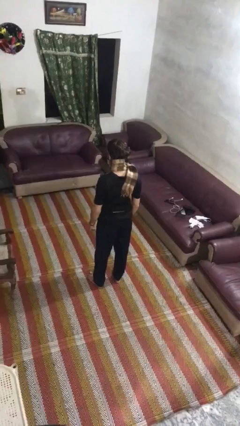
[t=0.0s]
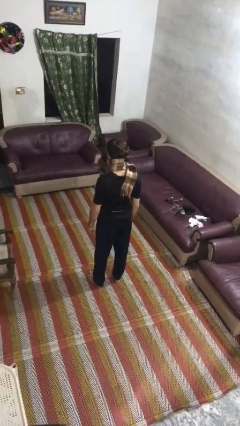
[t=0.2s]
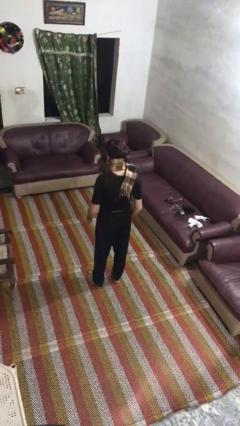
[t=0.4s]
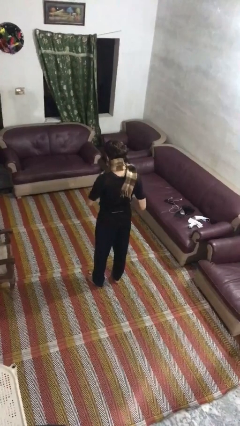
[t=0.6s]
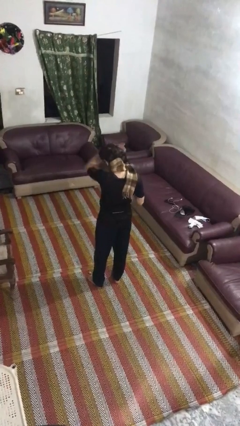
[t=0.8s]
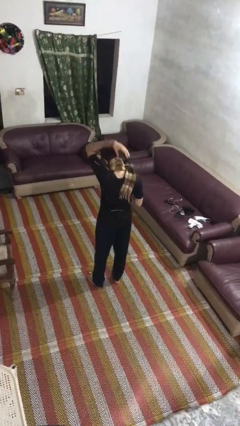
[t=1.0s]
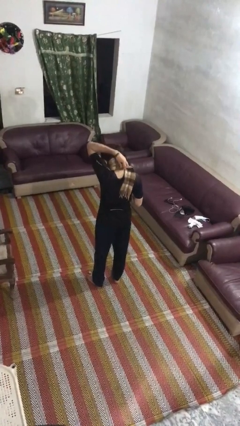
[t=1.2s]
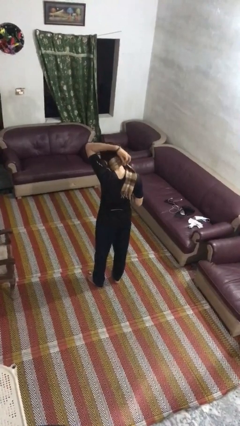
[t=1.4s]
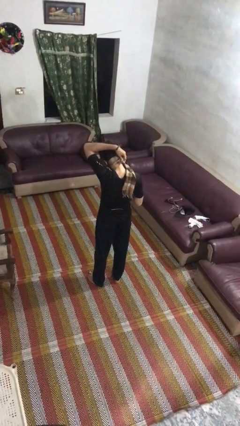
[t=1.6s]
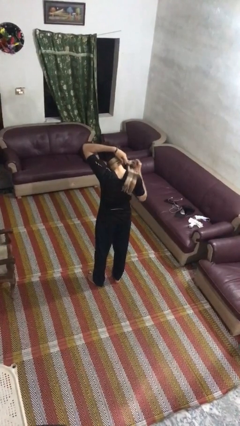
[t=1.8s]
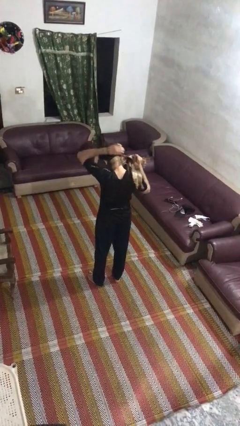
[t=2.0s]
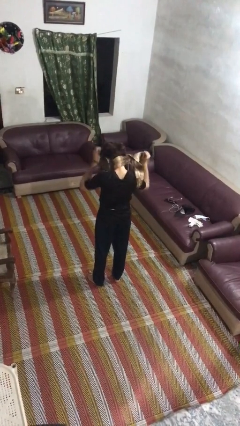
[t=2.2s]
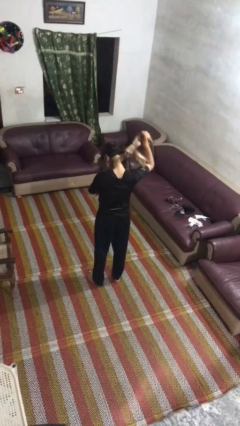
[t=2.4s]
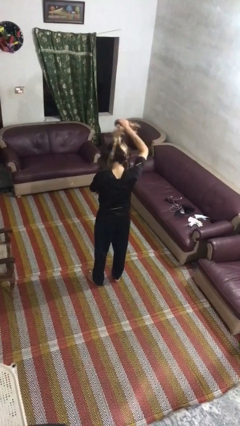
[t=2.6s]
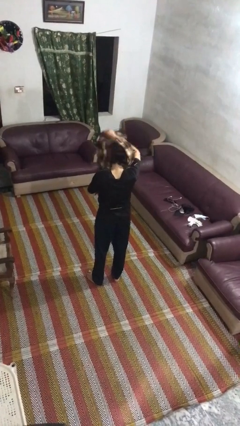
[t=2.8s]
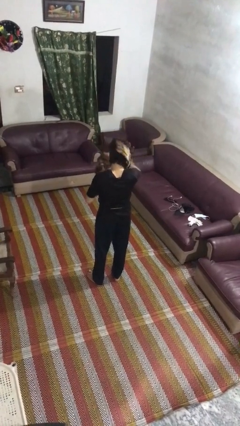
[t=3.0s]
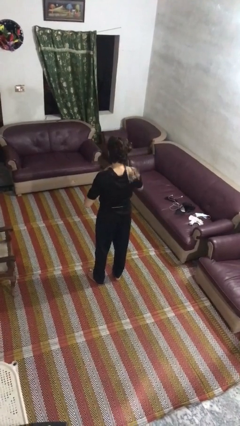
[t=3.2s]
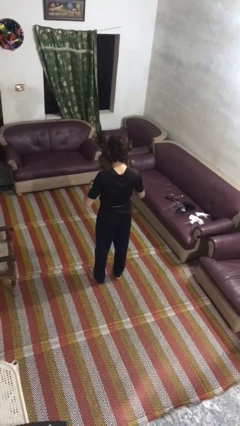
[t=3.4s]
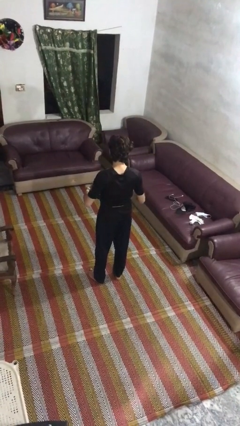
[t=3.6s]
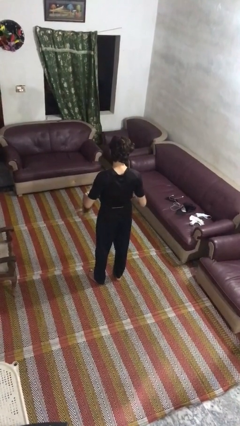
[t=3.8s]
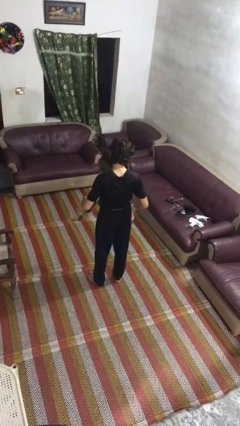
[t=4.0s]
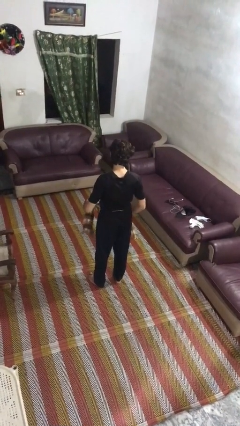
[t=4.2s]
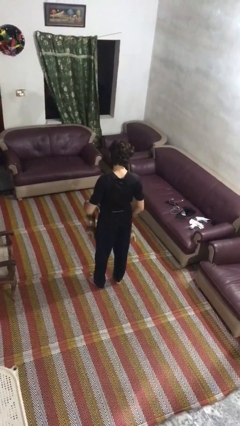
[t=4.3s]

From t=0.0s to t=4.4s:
person takes off scarf

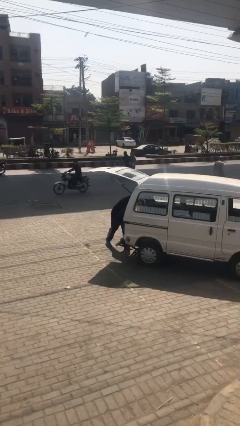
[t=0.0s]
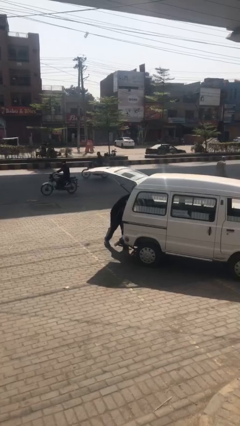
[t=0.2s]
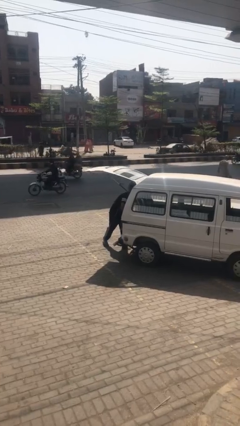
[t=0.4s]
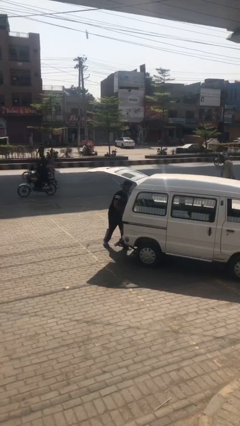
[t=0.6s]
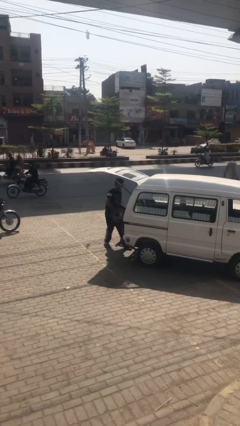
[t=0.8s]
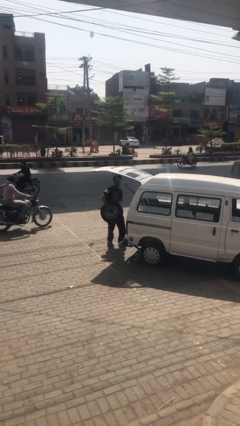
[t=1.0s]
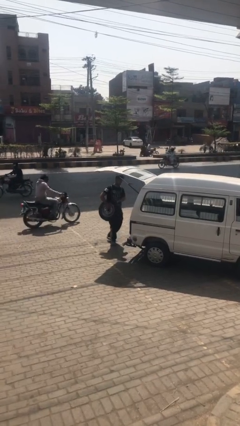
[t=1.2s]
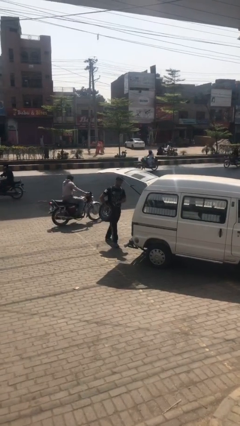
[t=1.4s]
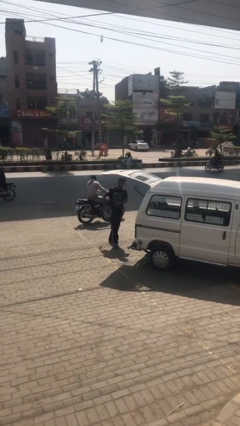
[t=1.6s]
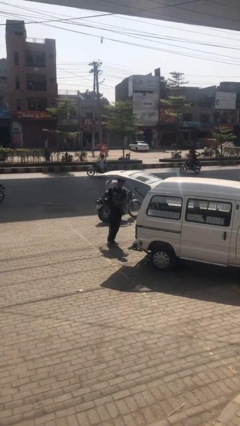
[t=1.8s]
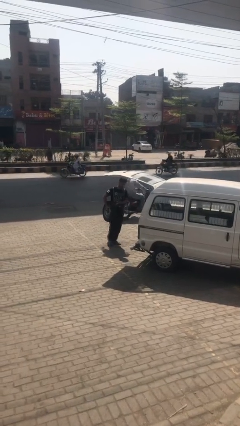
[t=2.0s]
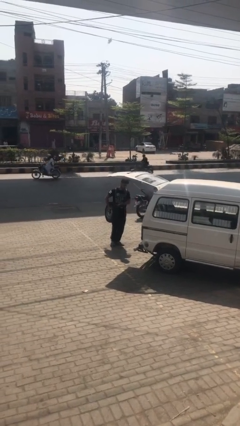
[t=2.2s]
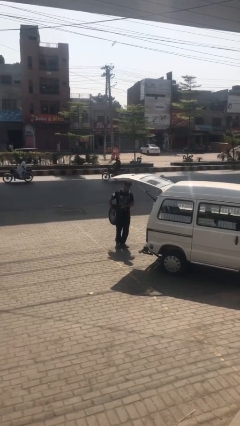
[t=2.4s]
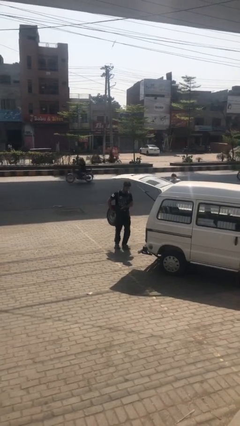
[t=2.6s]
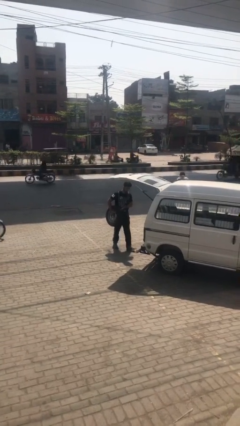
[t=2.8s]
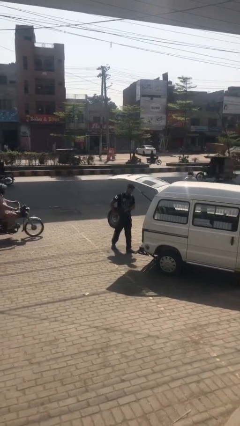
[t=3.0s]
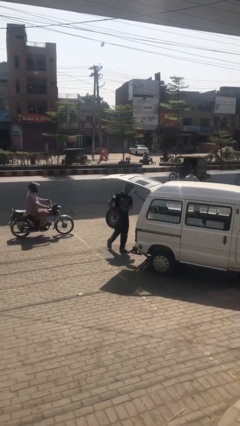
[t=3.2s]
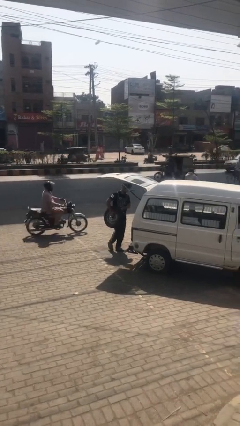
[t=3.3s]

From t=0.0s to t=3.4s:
person unloads car

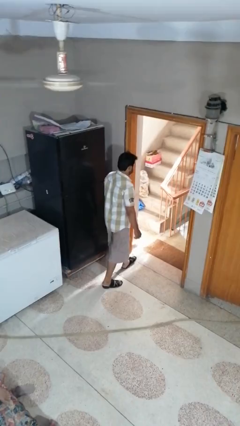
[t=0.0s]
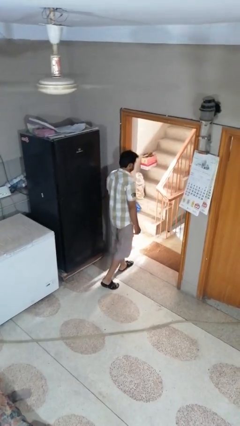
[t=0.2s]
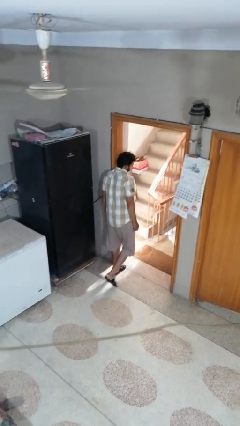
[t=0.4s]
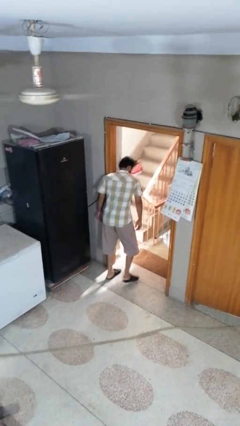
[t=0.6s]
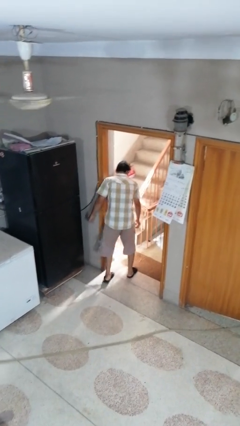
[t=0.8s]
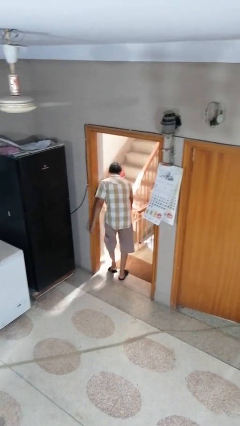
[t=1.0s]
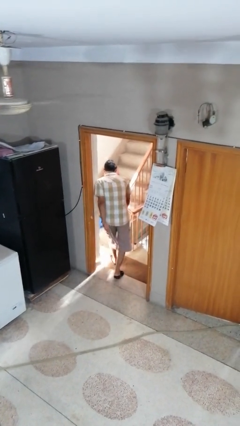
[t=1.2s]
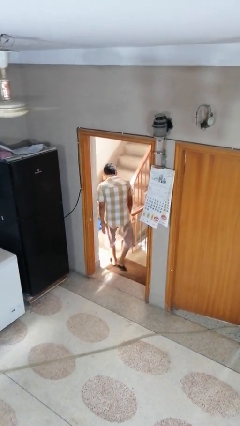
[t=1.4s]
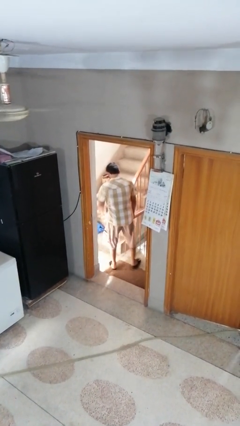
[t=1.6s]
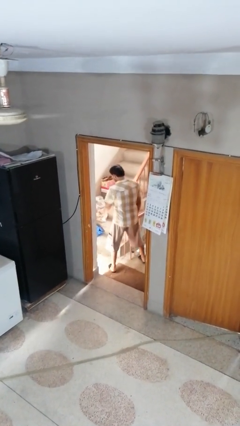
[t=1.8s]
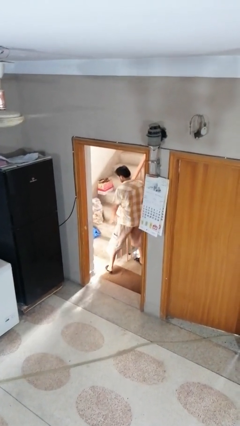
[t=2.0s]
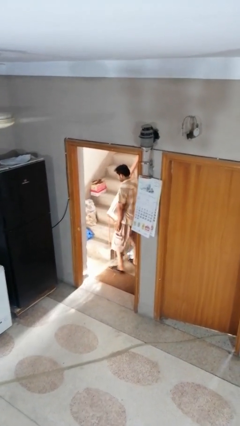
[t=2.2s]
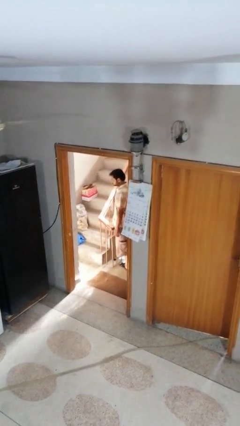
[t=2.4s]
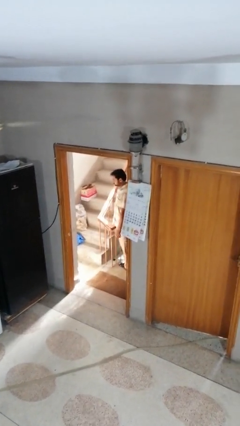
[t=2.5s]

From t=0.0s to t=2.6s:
person bumps into wall

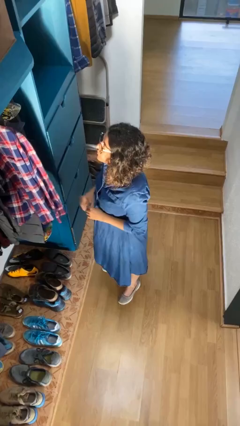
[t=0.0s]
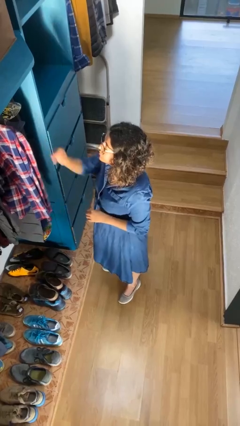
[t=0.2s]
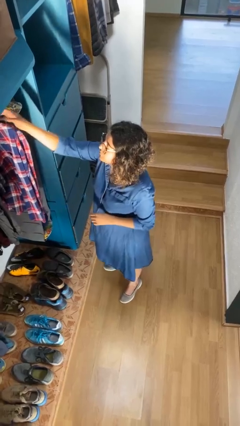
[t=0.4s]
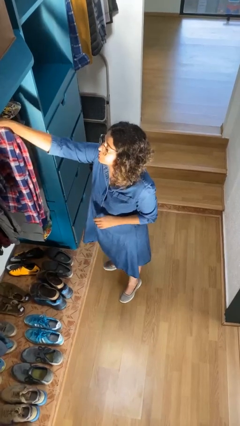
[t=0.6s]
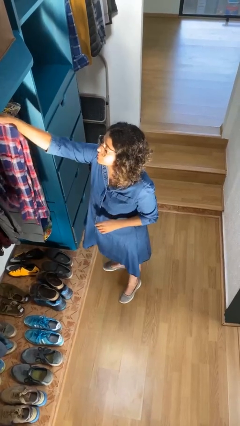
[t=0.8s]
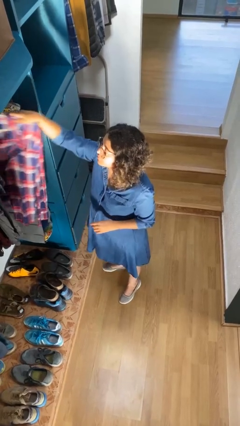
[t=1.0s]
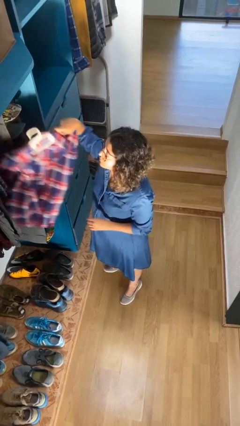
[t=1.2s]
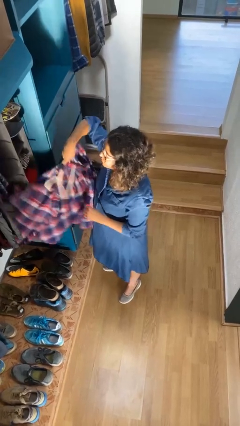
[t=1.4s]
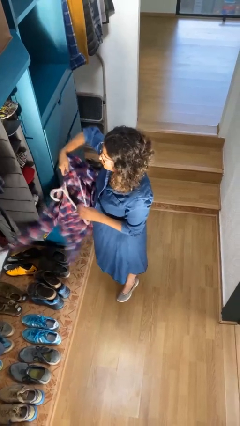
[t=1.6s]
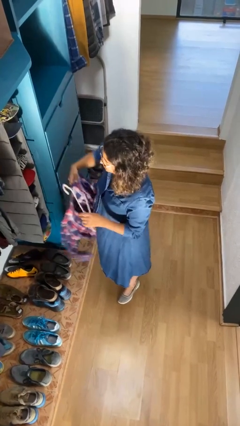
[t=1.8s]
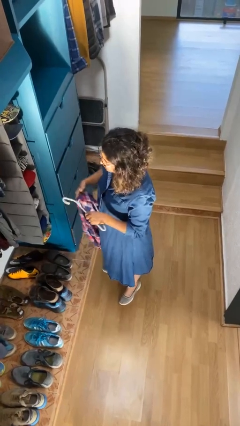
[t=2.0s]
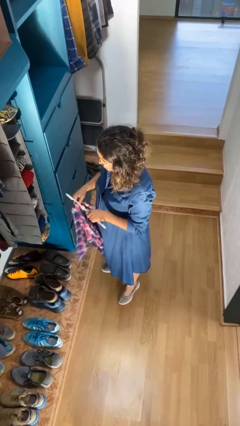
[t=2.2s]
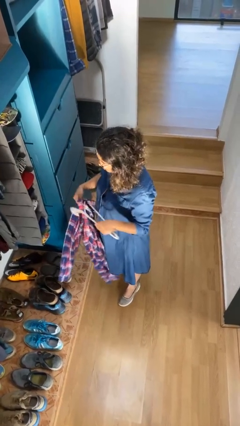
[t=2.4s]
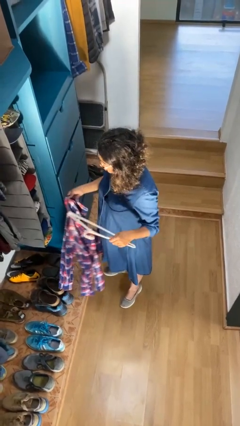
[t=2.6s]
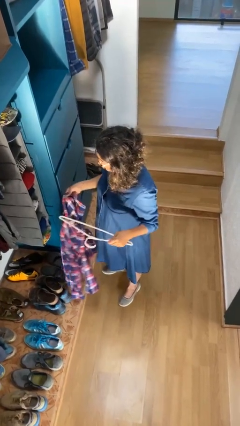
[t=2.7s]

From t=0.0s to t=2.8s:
person takes clothes from closet

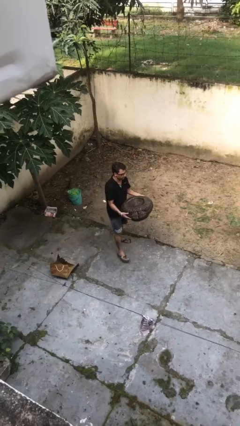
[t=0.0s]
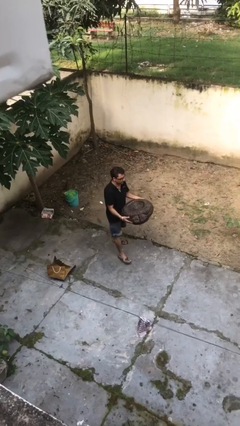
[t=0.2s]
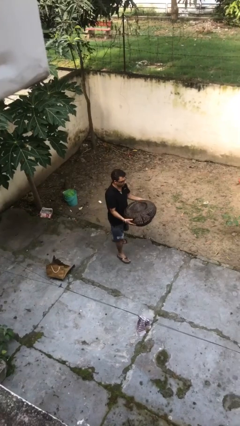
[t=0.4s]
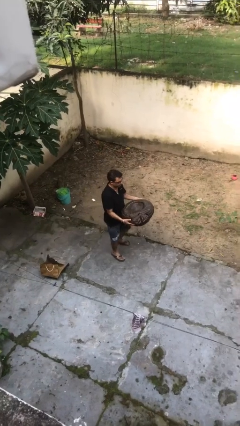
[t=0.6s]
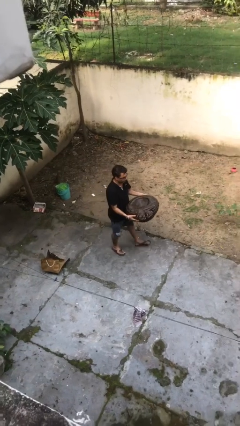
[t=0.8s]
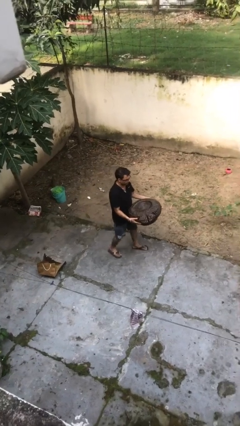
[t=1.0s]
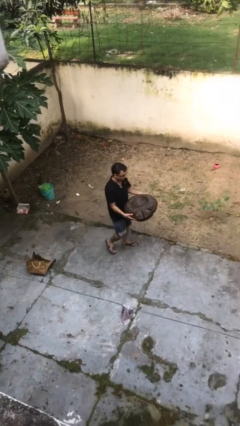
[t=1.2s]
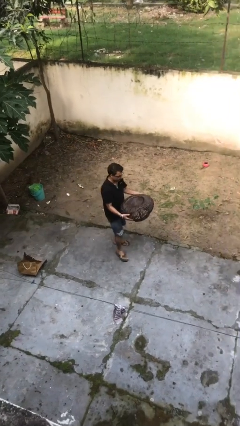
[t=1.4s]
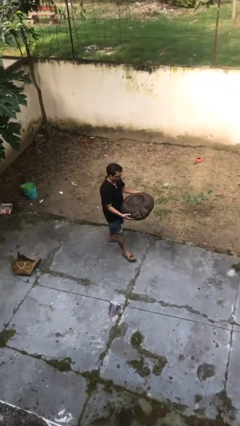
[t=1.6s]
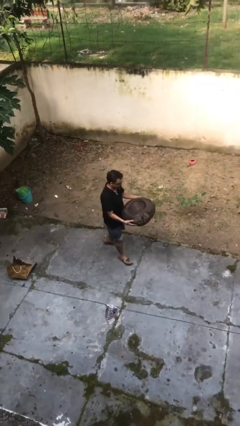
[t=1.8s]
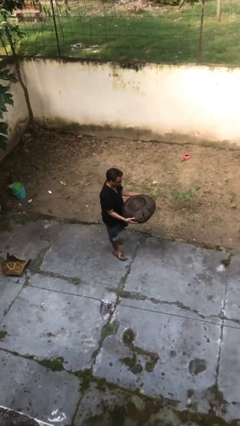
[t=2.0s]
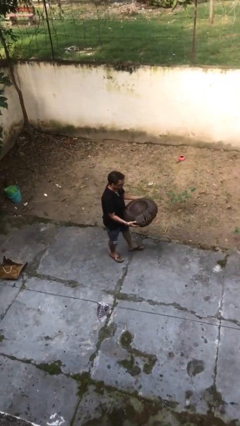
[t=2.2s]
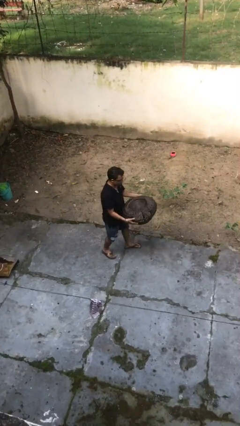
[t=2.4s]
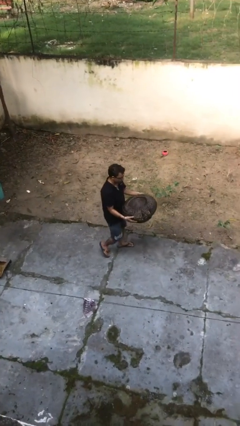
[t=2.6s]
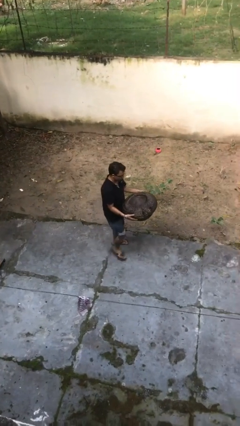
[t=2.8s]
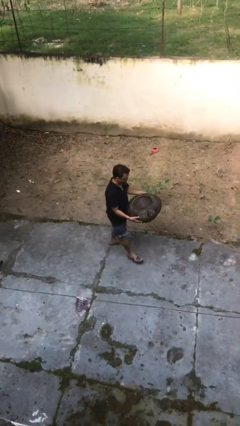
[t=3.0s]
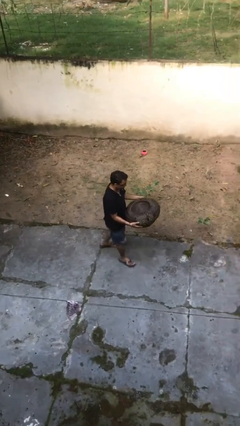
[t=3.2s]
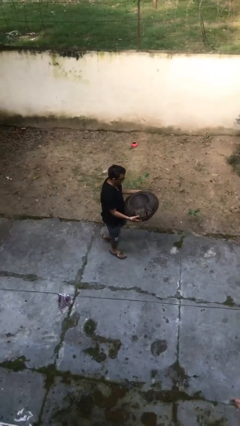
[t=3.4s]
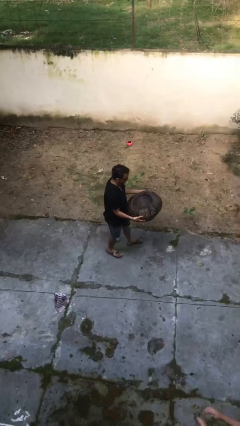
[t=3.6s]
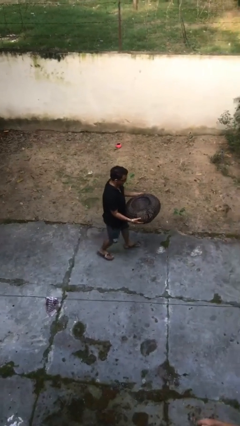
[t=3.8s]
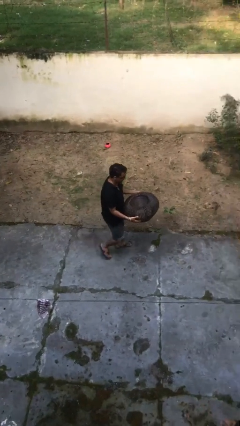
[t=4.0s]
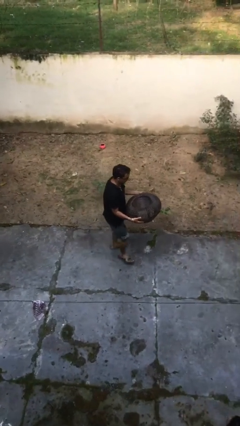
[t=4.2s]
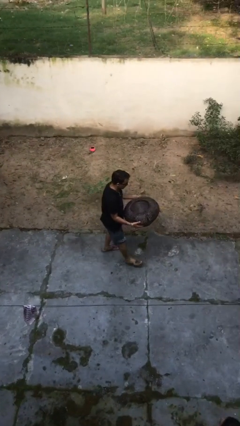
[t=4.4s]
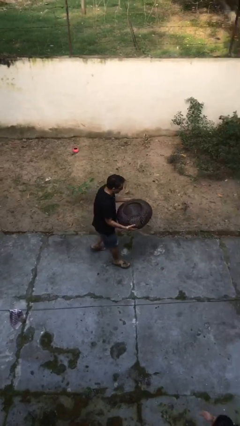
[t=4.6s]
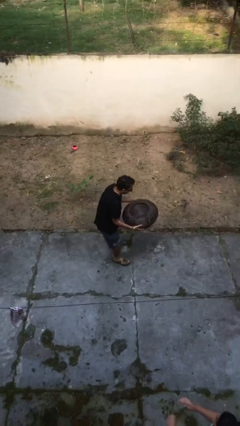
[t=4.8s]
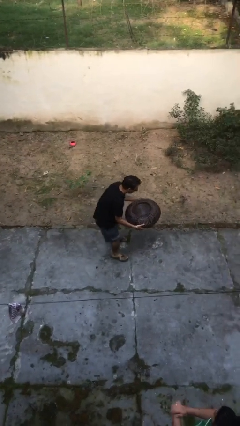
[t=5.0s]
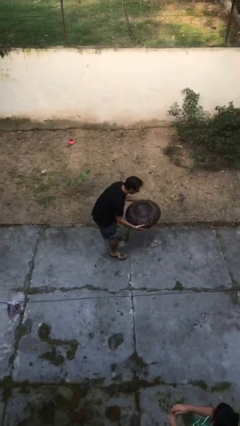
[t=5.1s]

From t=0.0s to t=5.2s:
person carries heavy object
